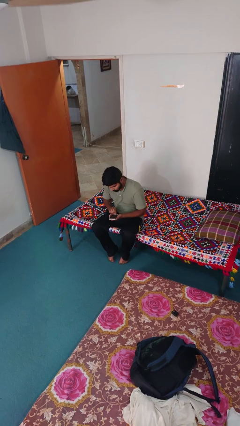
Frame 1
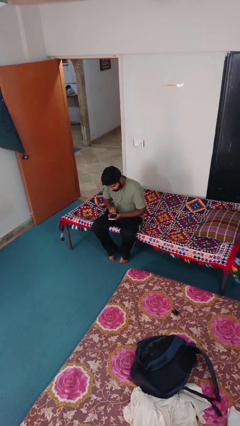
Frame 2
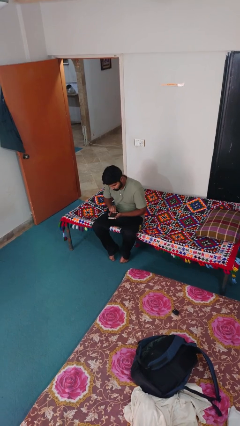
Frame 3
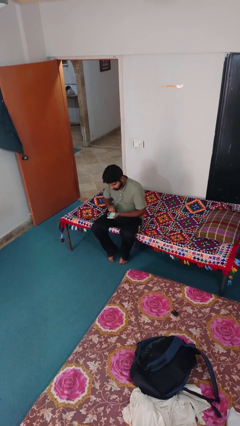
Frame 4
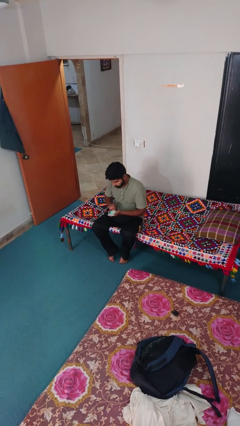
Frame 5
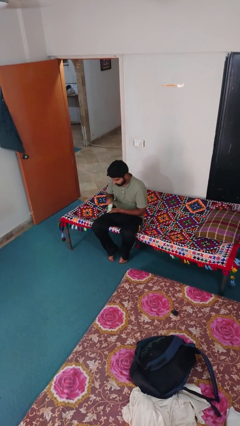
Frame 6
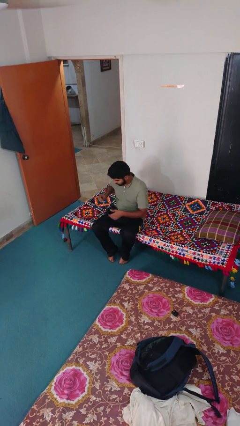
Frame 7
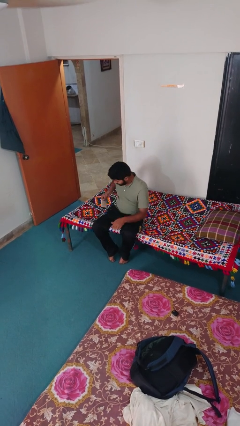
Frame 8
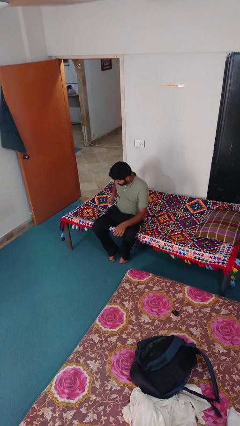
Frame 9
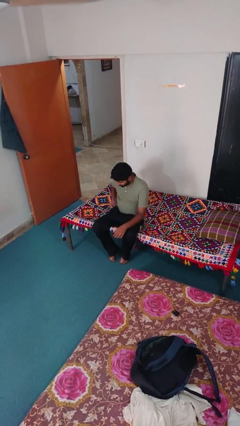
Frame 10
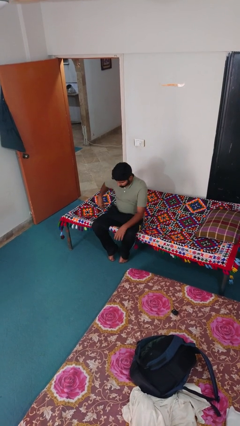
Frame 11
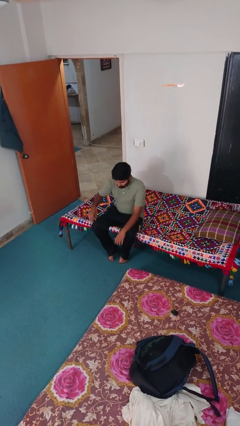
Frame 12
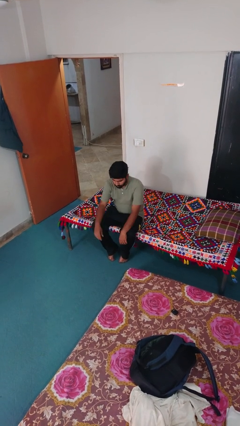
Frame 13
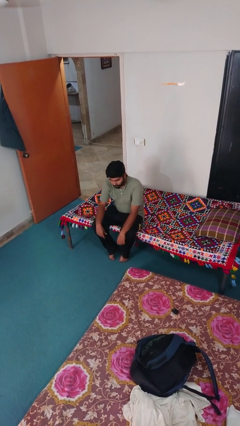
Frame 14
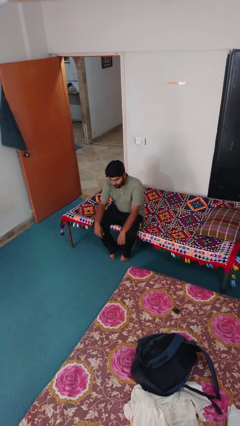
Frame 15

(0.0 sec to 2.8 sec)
person puts phone into pocket

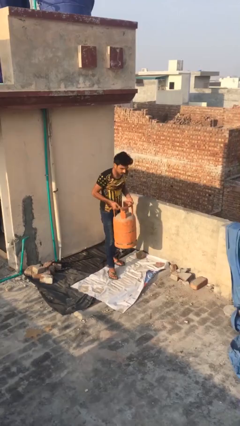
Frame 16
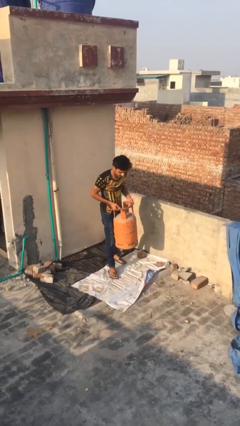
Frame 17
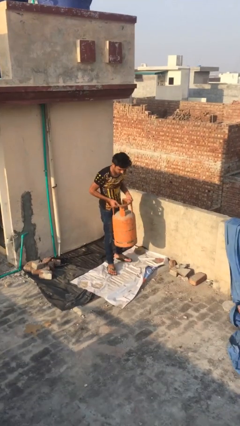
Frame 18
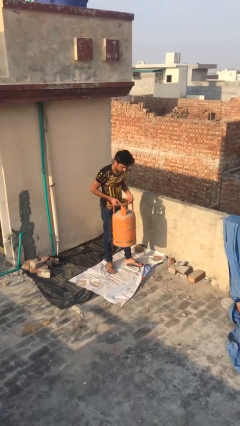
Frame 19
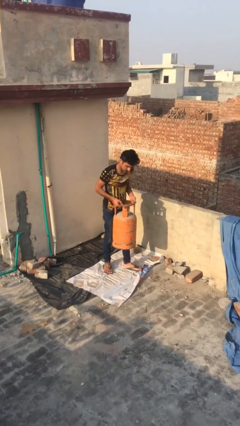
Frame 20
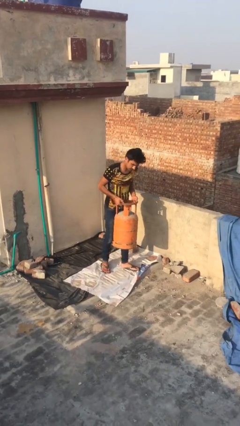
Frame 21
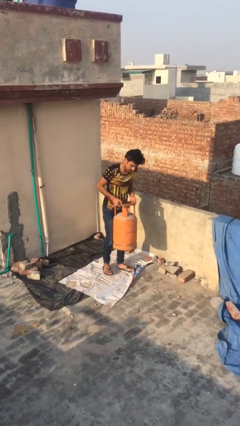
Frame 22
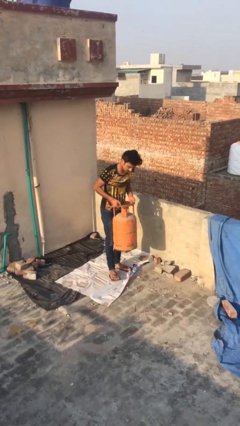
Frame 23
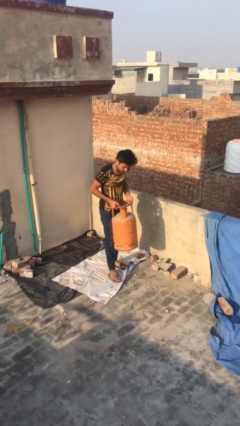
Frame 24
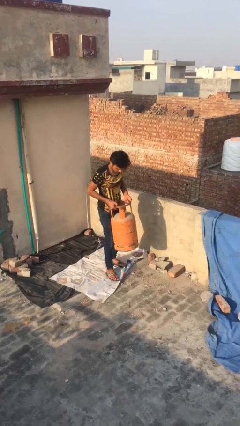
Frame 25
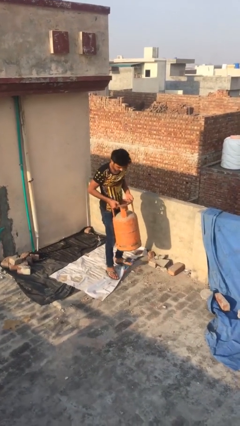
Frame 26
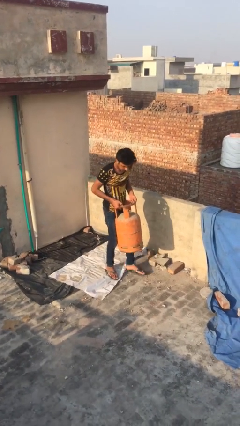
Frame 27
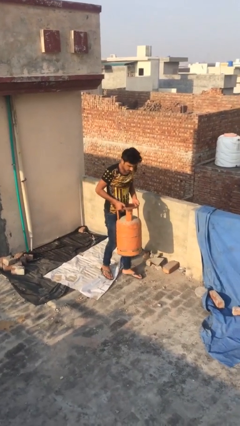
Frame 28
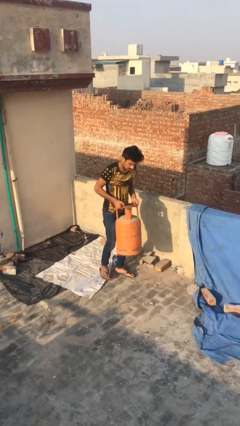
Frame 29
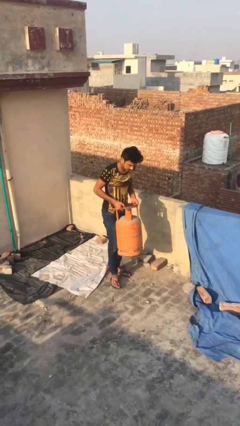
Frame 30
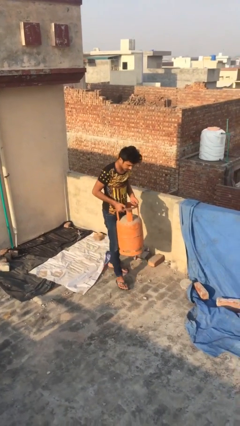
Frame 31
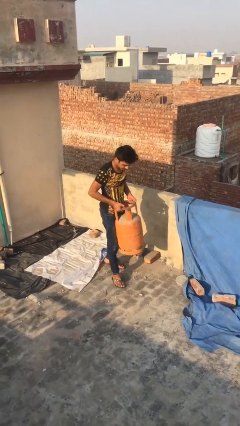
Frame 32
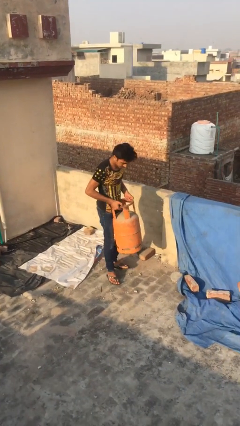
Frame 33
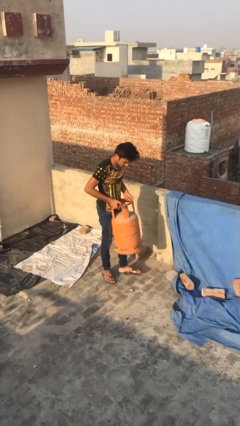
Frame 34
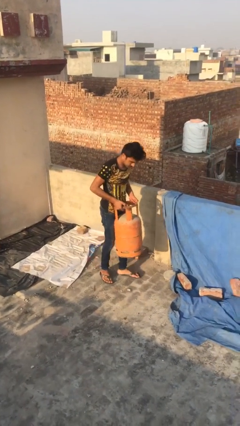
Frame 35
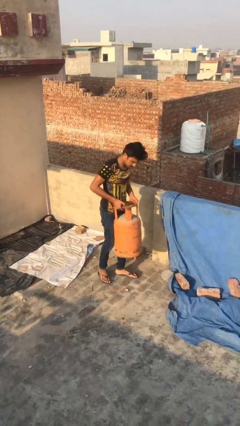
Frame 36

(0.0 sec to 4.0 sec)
person carries heavy object

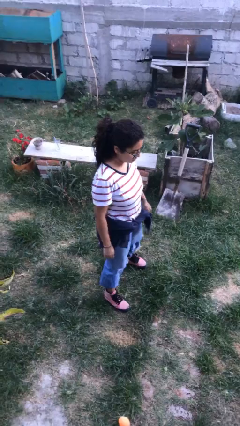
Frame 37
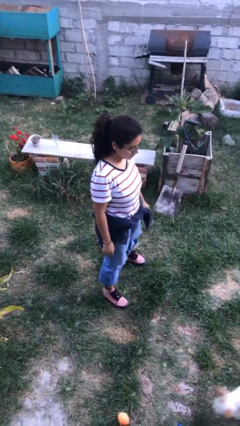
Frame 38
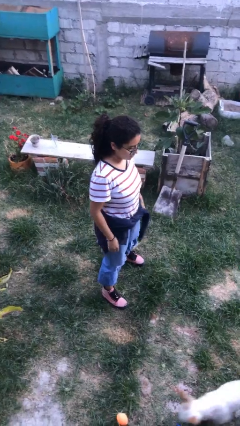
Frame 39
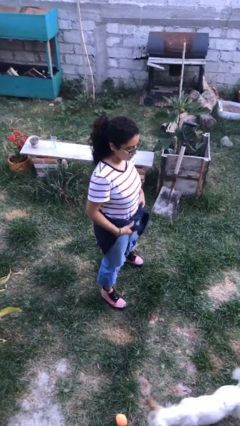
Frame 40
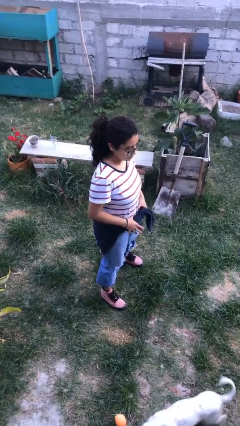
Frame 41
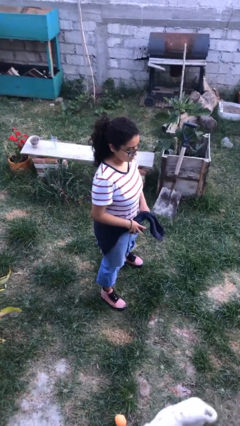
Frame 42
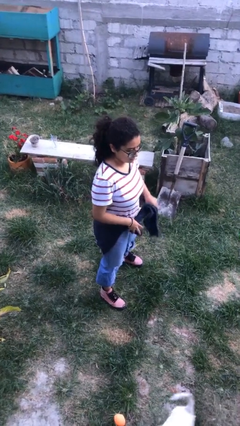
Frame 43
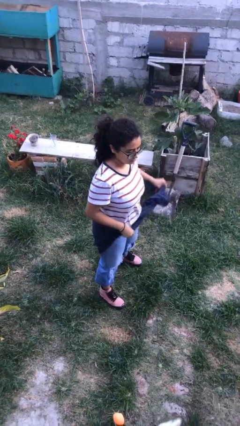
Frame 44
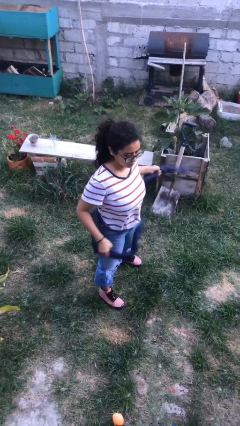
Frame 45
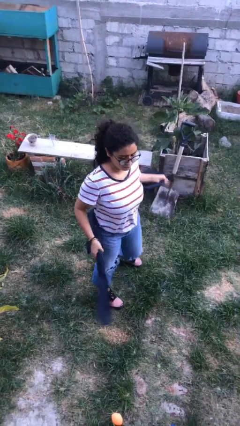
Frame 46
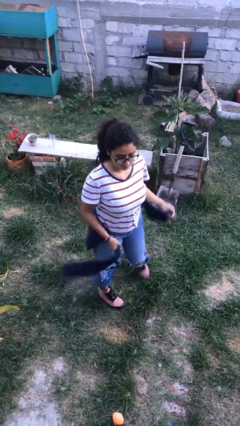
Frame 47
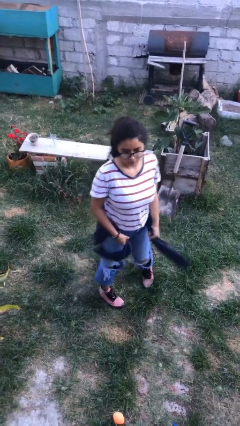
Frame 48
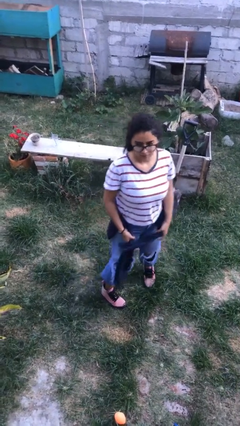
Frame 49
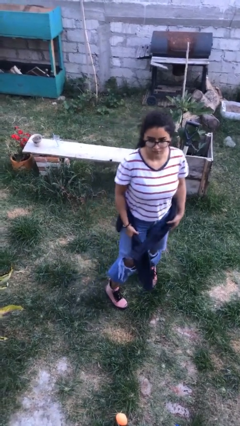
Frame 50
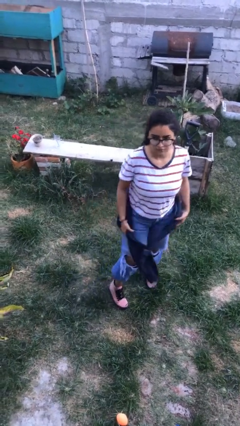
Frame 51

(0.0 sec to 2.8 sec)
person unties jacket around waist

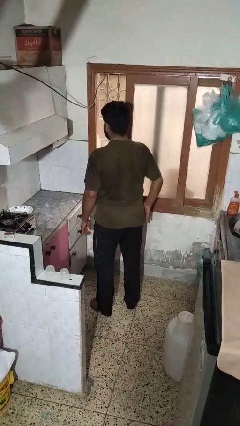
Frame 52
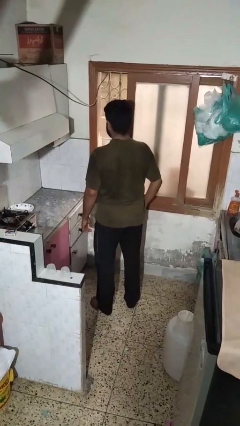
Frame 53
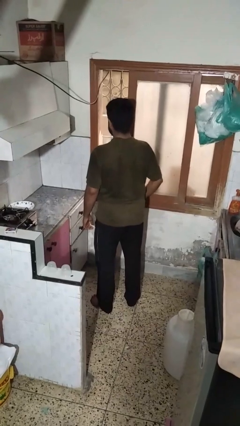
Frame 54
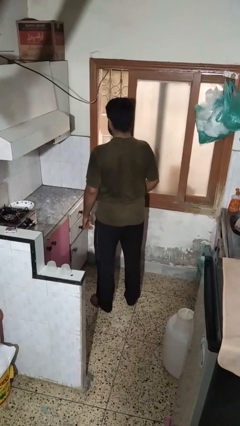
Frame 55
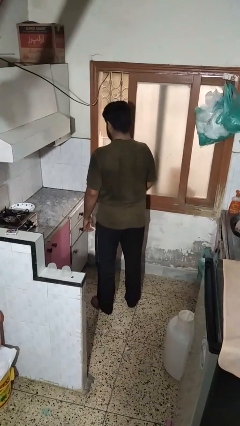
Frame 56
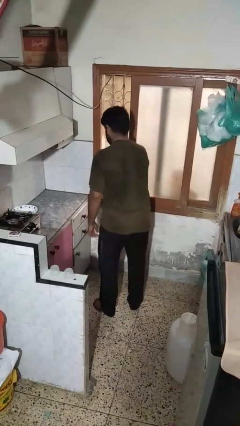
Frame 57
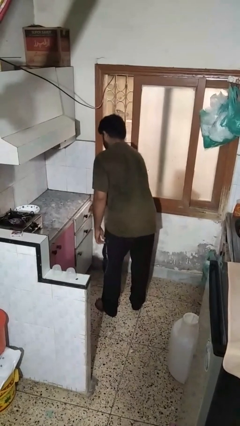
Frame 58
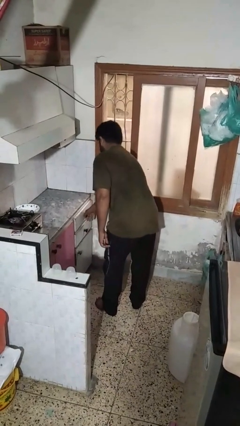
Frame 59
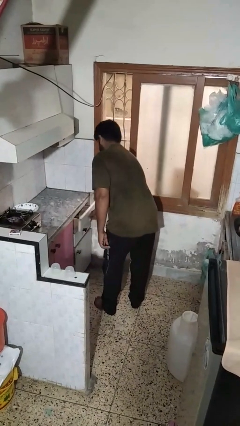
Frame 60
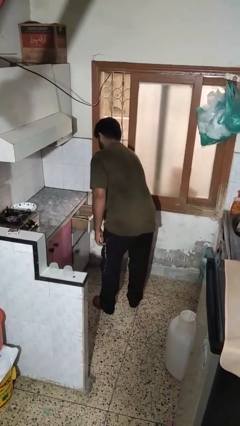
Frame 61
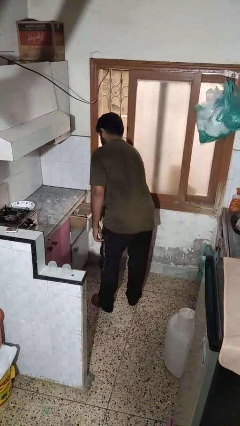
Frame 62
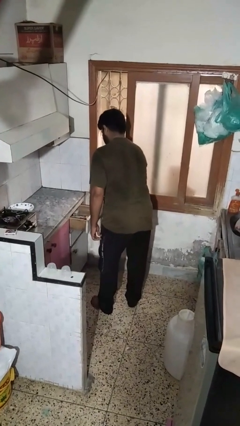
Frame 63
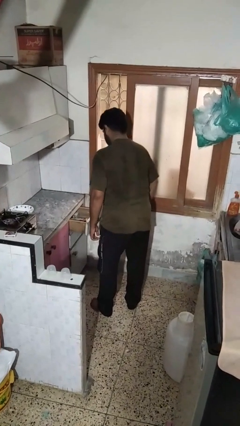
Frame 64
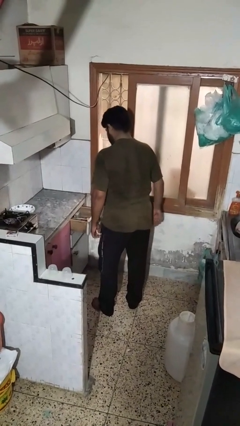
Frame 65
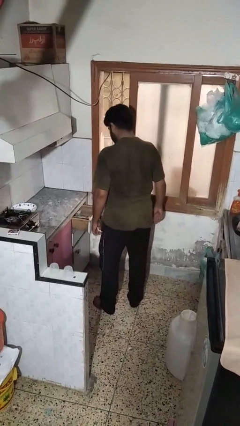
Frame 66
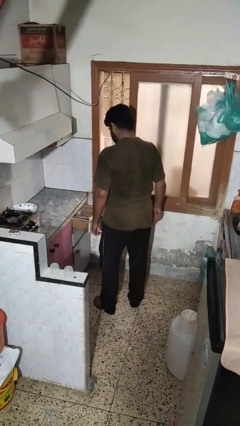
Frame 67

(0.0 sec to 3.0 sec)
person opens kitchen drawer

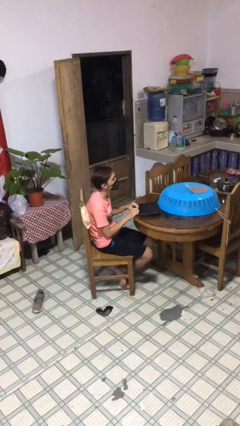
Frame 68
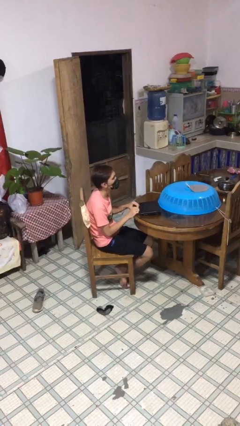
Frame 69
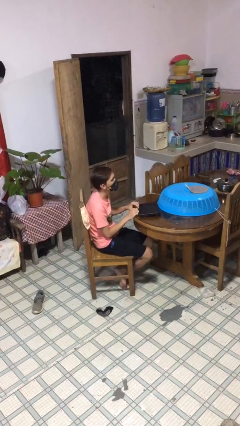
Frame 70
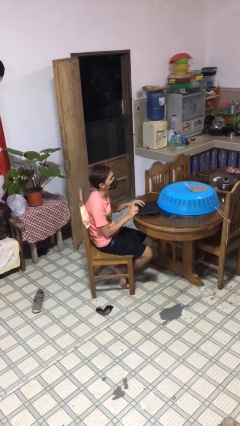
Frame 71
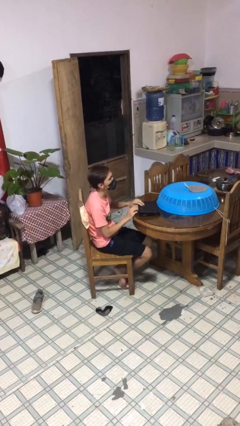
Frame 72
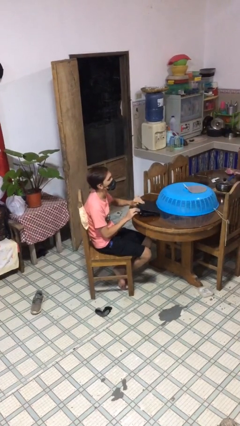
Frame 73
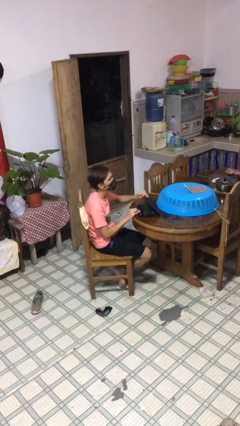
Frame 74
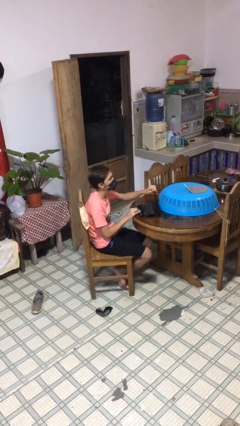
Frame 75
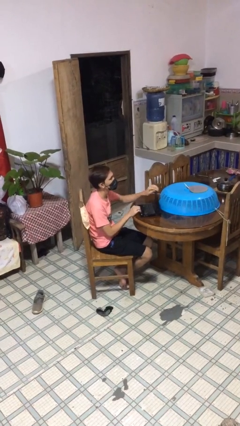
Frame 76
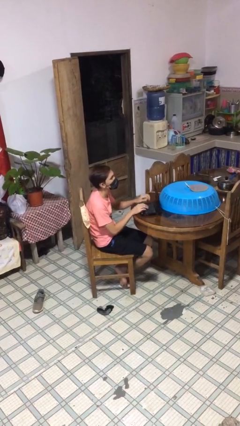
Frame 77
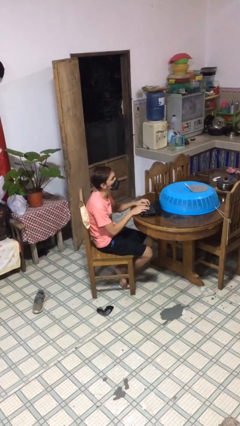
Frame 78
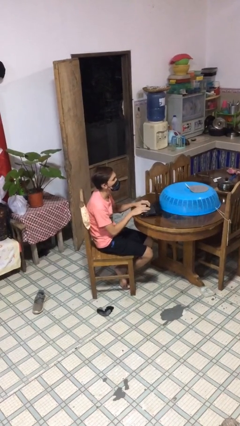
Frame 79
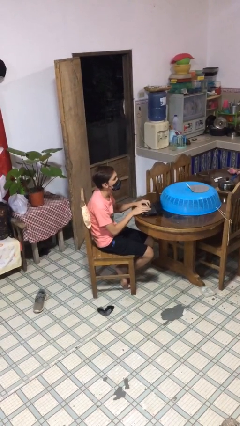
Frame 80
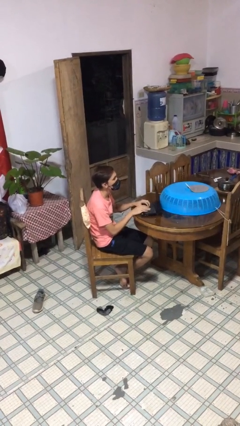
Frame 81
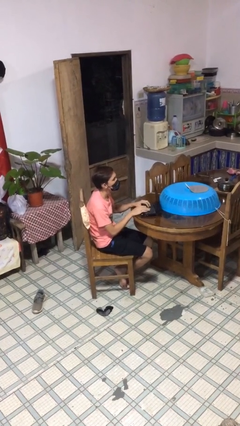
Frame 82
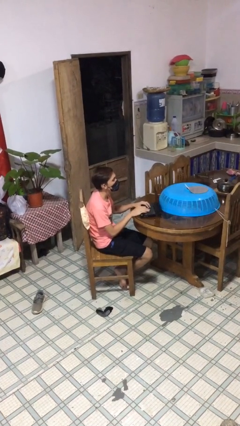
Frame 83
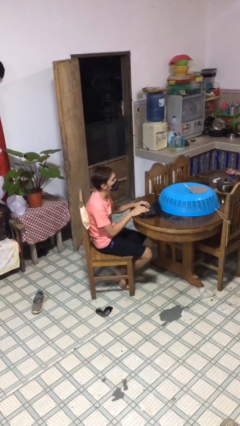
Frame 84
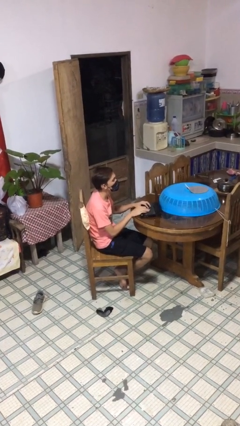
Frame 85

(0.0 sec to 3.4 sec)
person interacts with laptop

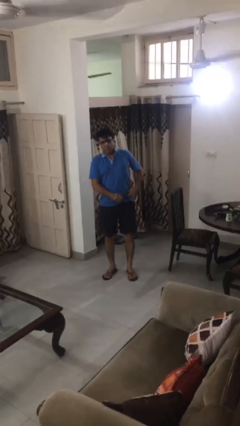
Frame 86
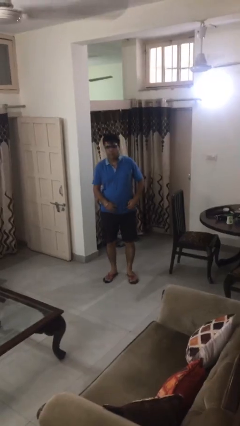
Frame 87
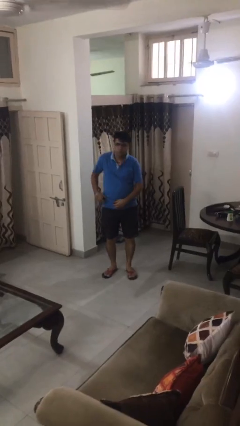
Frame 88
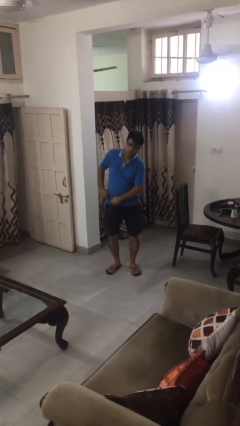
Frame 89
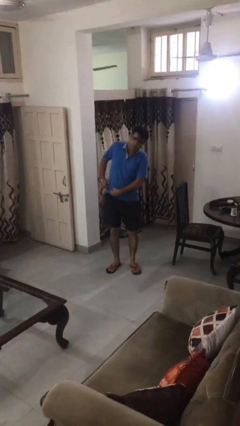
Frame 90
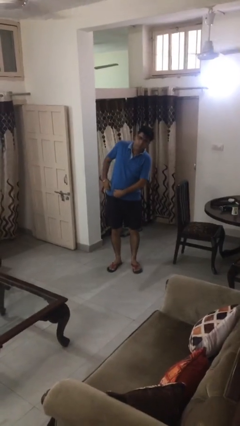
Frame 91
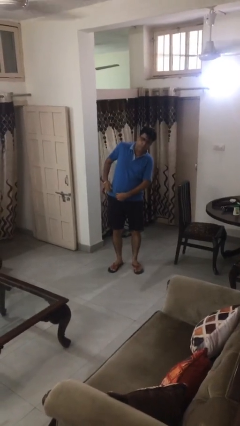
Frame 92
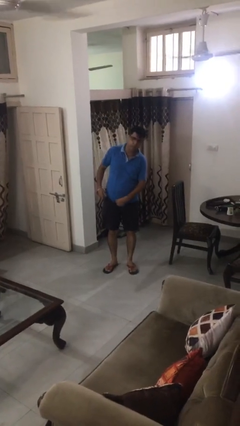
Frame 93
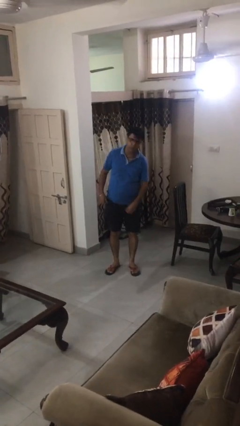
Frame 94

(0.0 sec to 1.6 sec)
person hikes up pants
